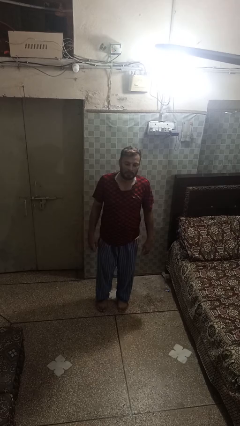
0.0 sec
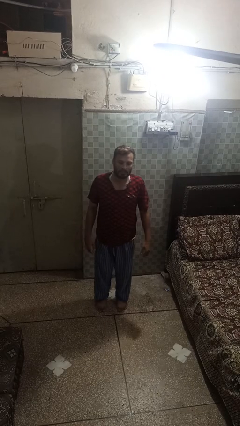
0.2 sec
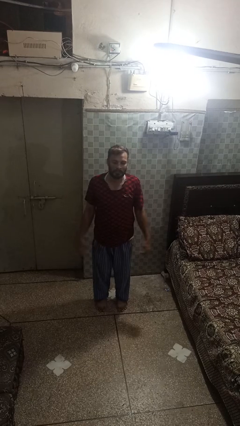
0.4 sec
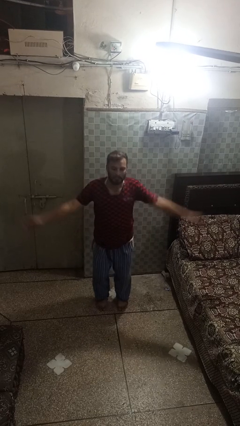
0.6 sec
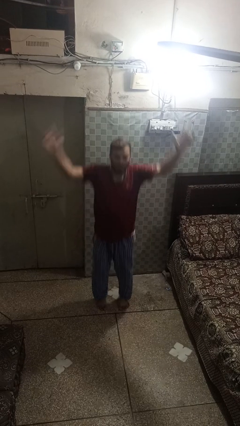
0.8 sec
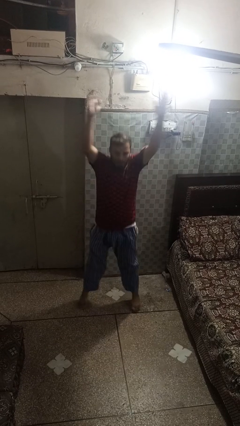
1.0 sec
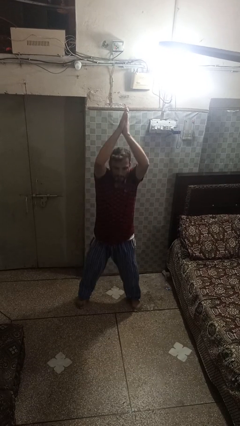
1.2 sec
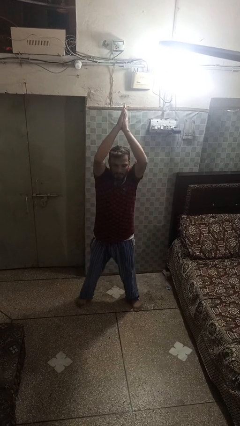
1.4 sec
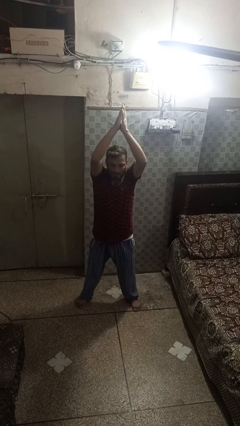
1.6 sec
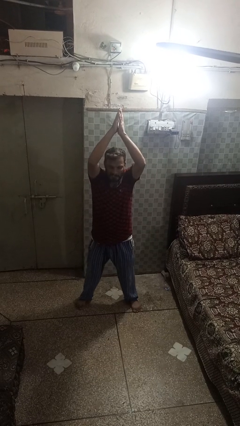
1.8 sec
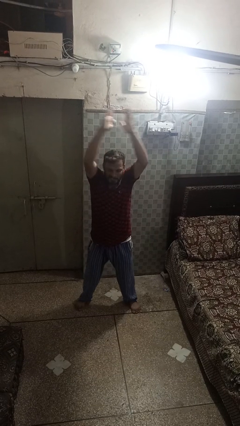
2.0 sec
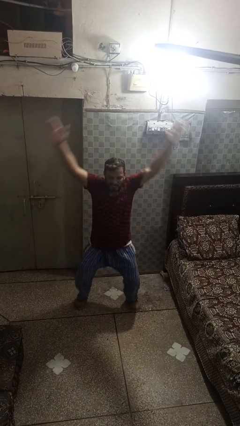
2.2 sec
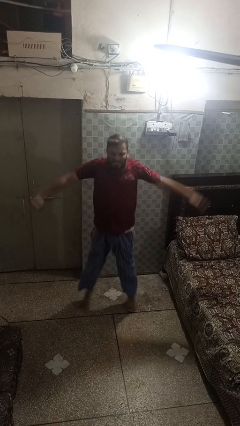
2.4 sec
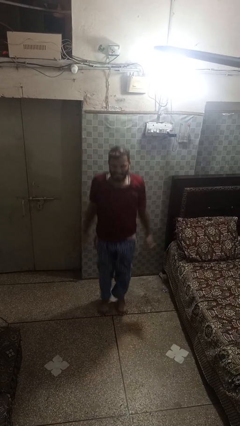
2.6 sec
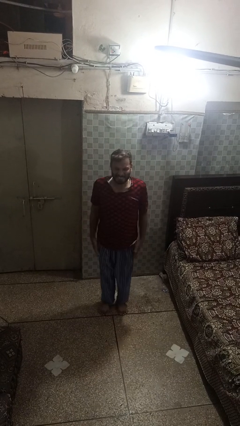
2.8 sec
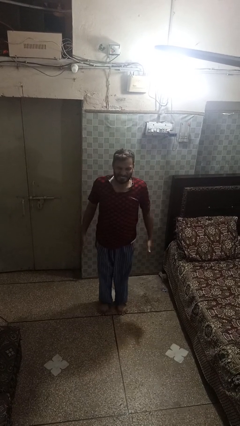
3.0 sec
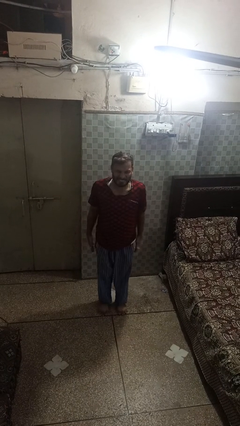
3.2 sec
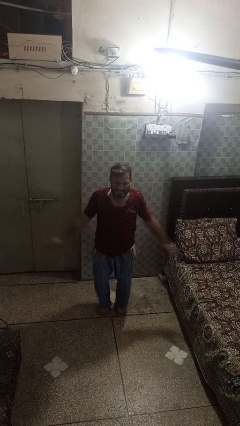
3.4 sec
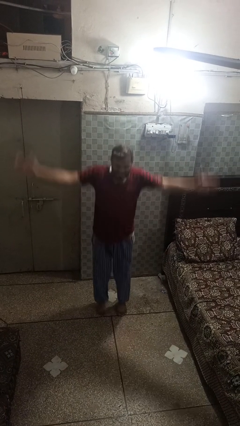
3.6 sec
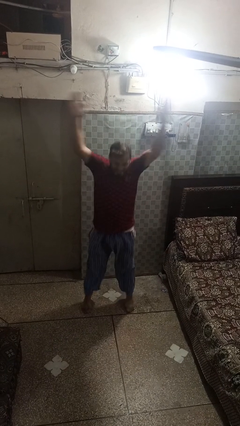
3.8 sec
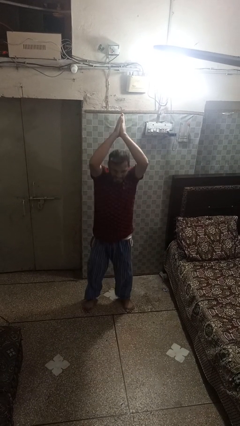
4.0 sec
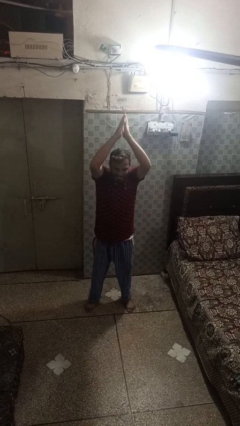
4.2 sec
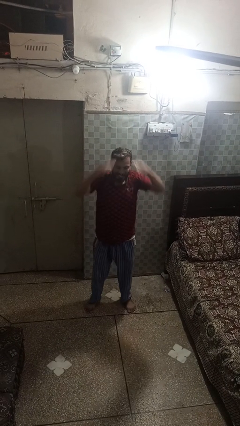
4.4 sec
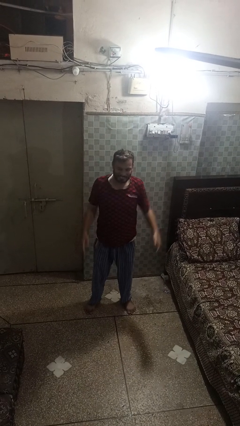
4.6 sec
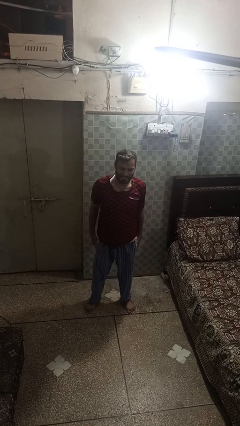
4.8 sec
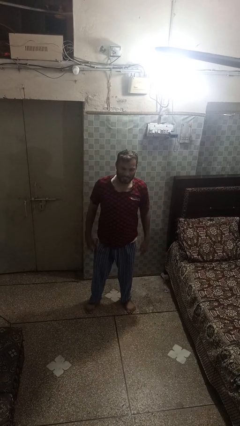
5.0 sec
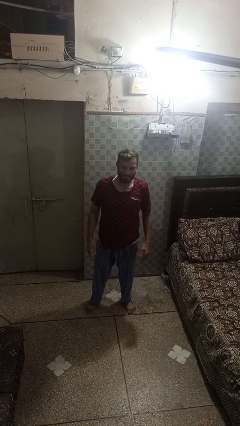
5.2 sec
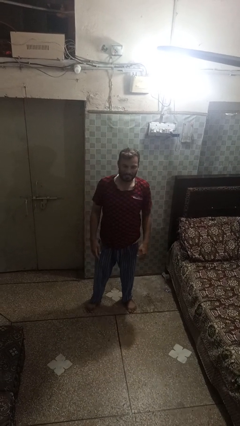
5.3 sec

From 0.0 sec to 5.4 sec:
person exercises with jumping jacks

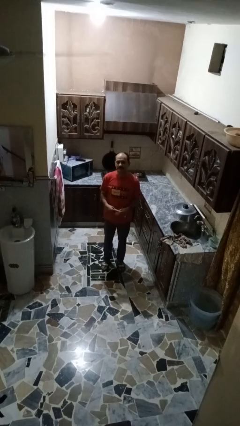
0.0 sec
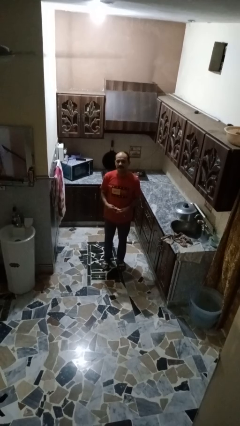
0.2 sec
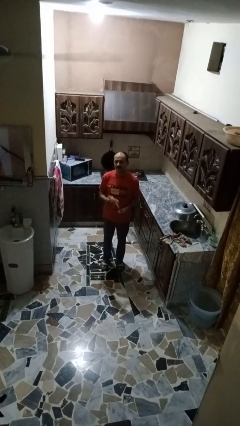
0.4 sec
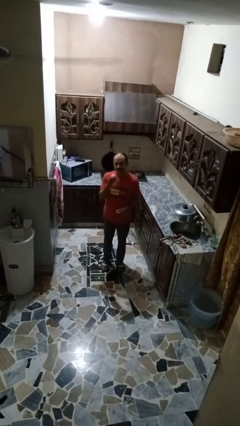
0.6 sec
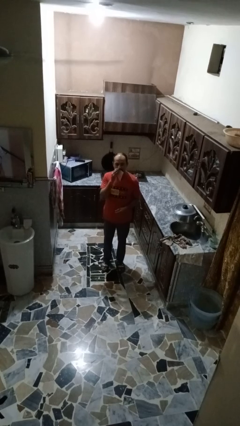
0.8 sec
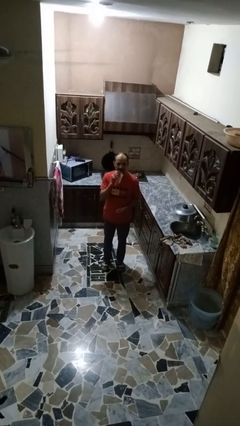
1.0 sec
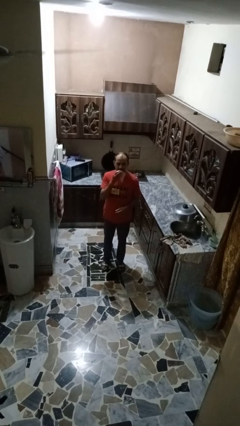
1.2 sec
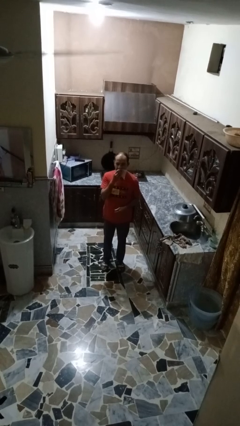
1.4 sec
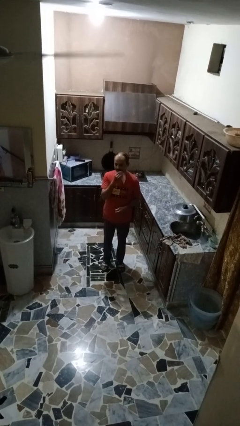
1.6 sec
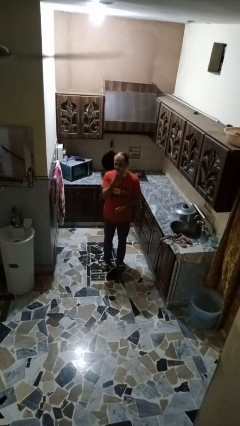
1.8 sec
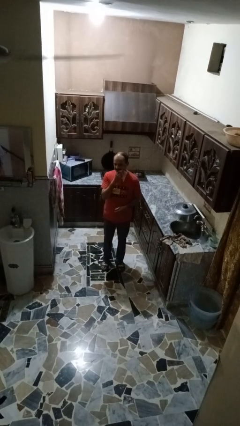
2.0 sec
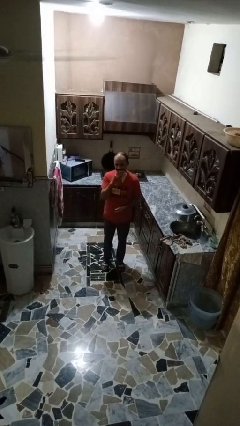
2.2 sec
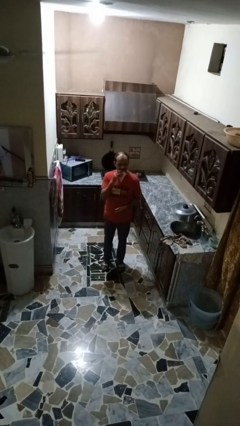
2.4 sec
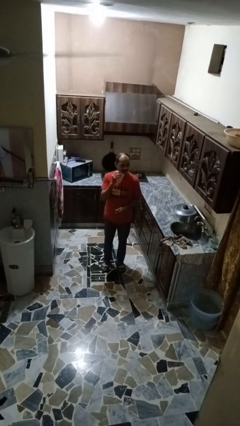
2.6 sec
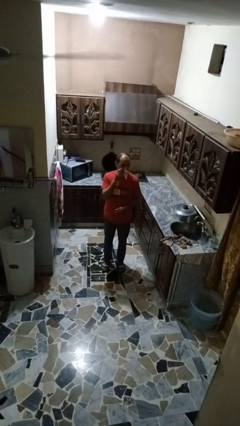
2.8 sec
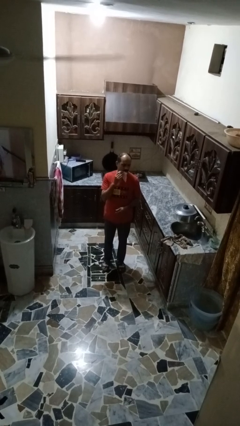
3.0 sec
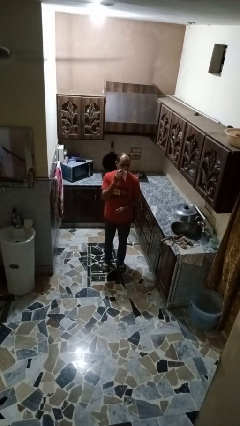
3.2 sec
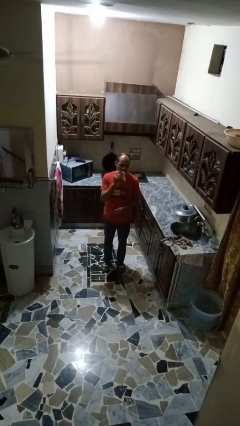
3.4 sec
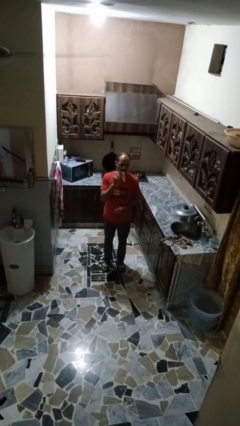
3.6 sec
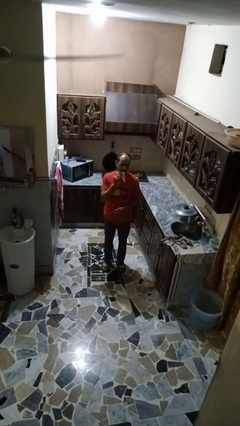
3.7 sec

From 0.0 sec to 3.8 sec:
person wipes mouth with napkin

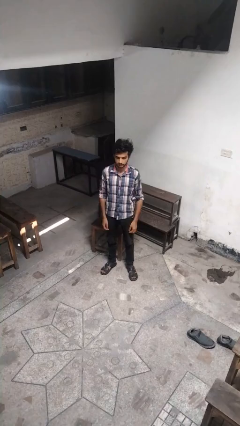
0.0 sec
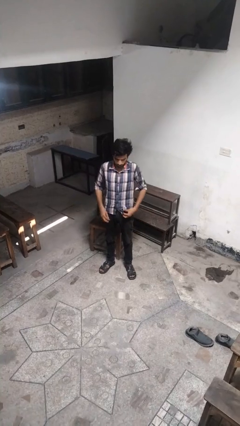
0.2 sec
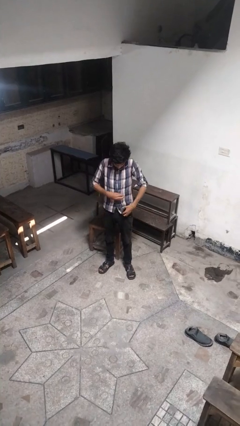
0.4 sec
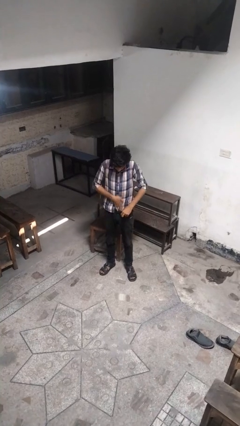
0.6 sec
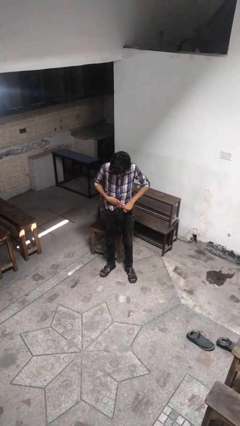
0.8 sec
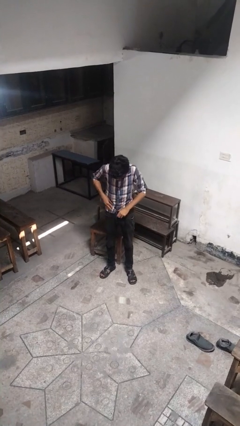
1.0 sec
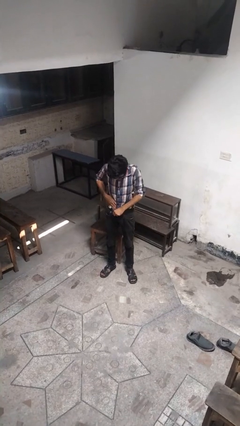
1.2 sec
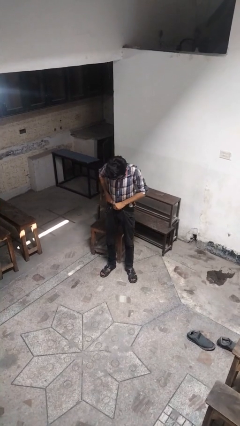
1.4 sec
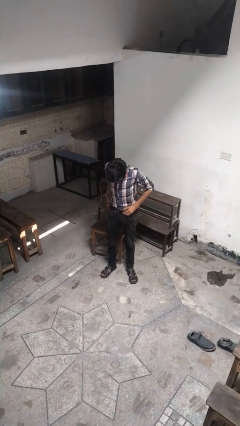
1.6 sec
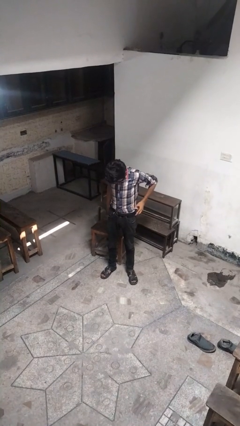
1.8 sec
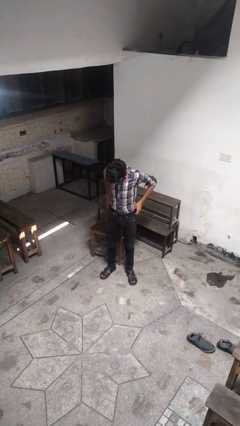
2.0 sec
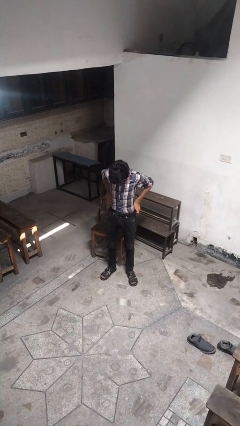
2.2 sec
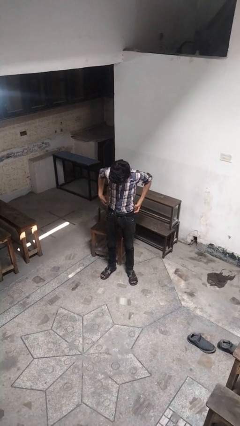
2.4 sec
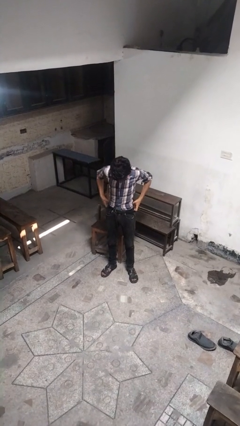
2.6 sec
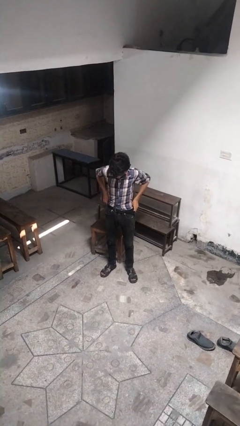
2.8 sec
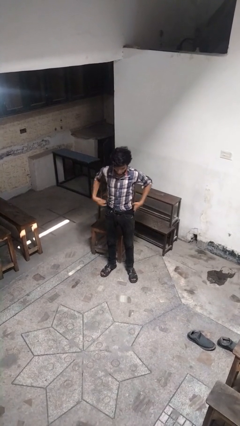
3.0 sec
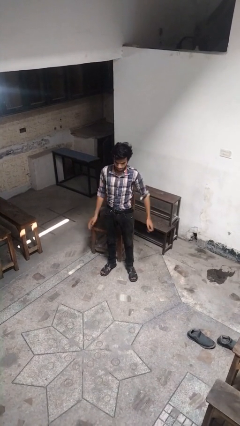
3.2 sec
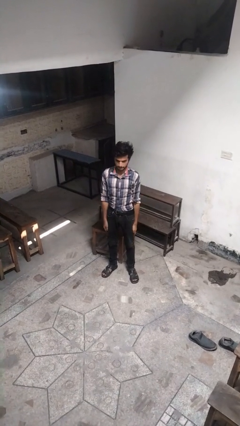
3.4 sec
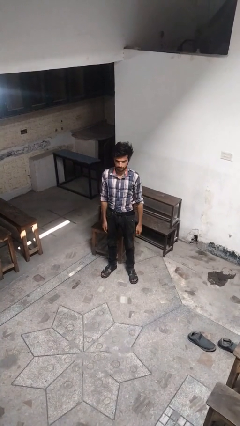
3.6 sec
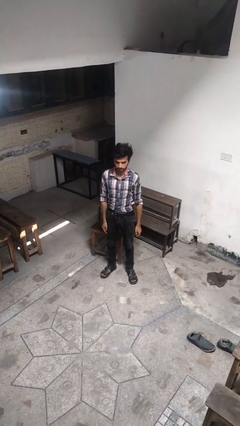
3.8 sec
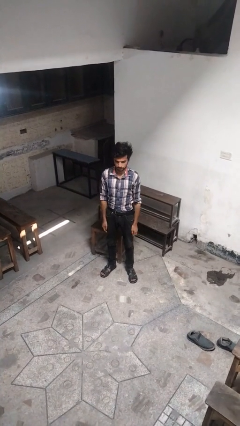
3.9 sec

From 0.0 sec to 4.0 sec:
person tucks in shirt

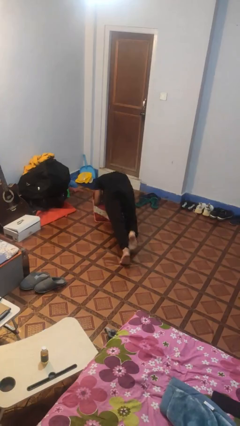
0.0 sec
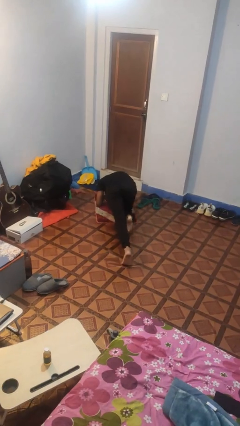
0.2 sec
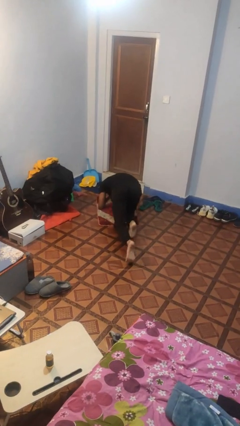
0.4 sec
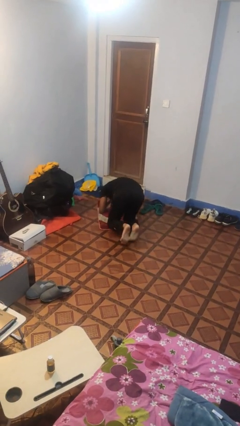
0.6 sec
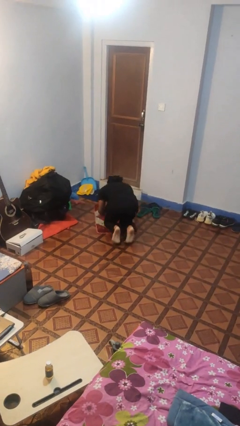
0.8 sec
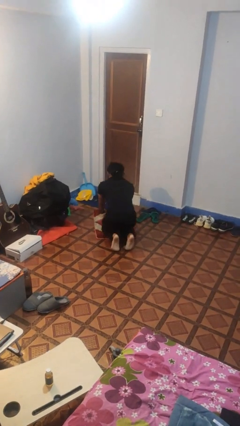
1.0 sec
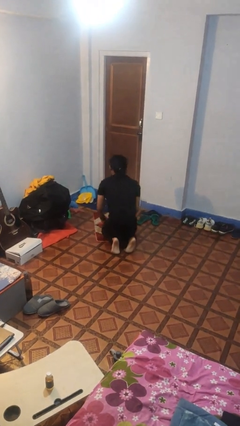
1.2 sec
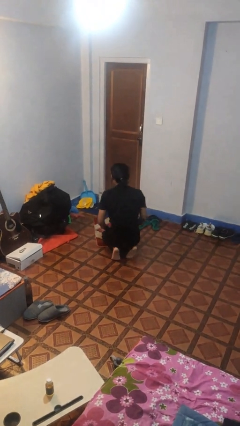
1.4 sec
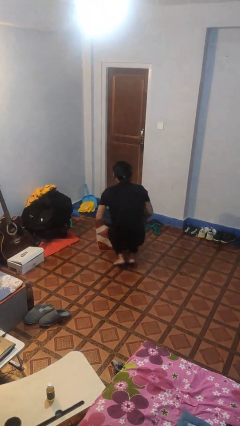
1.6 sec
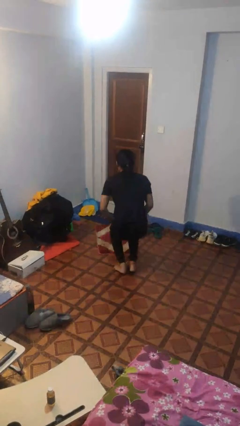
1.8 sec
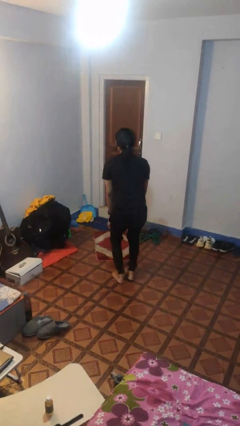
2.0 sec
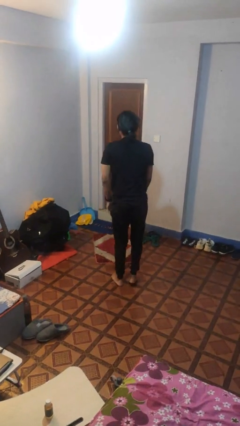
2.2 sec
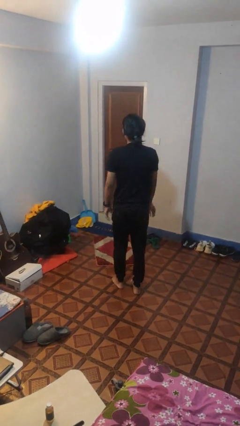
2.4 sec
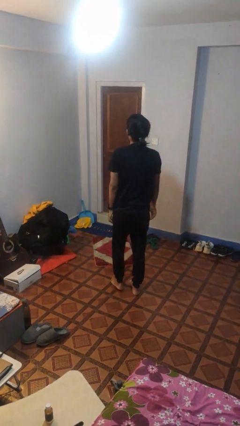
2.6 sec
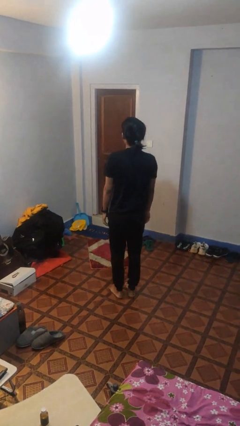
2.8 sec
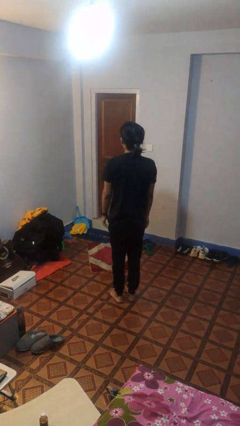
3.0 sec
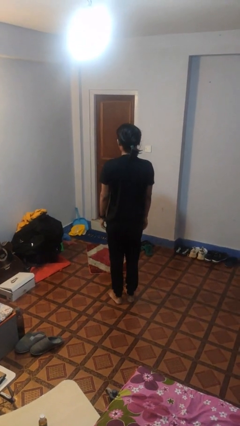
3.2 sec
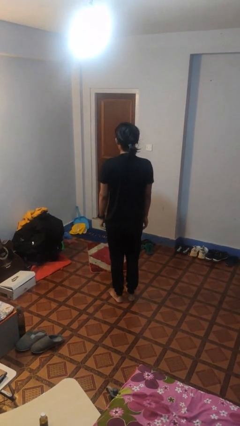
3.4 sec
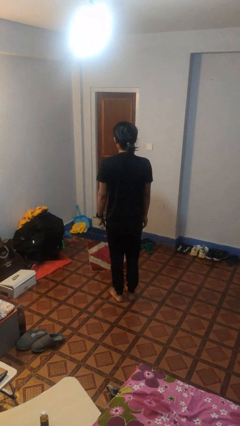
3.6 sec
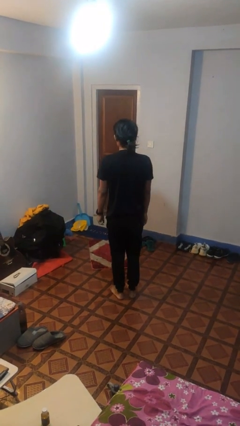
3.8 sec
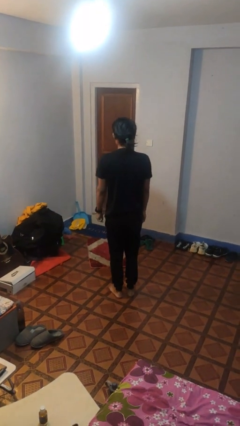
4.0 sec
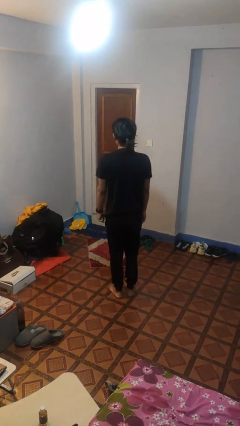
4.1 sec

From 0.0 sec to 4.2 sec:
person stands up from floor
